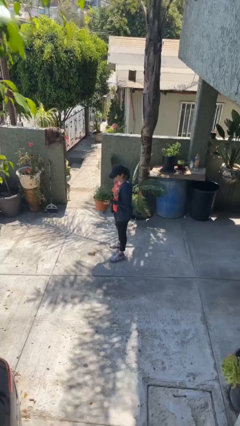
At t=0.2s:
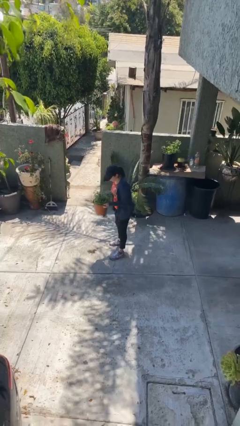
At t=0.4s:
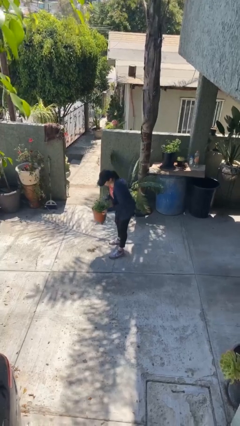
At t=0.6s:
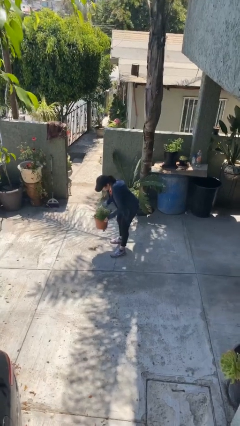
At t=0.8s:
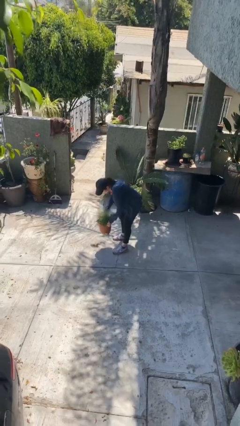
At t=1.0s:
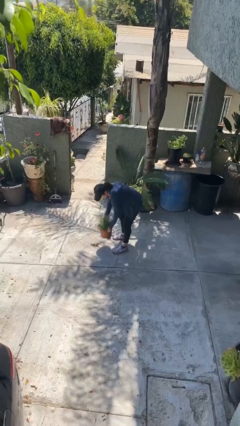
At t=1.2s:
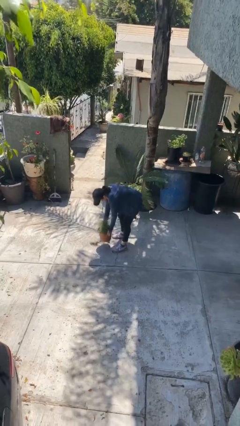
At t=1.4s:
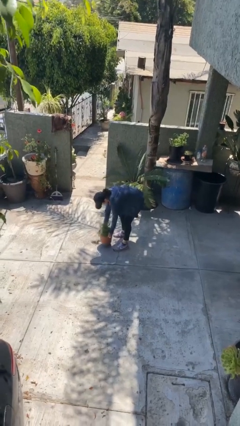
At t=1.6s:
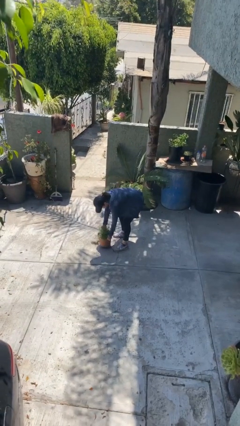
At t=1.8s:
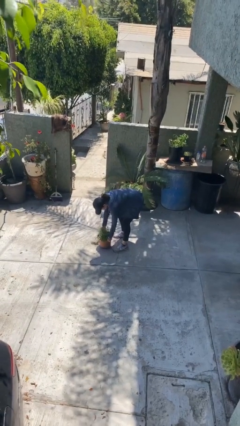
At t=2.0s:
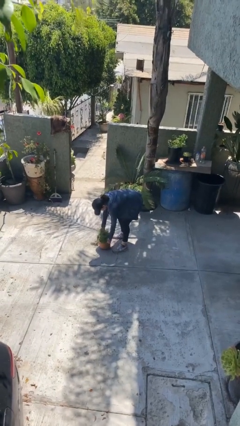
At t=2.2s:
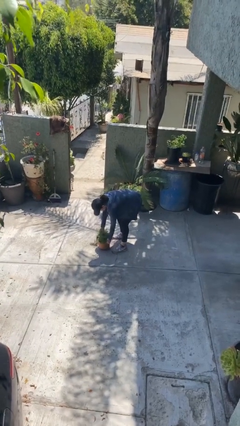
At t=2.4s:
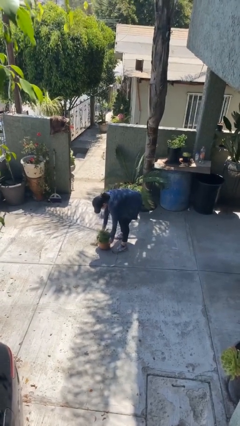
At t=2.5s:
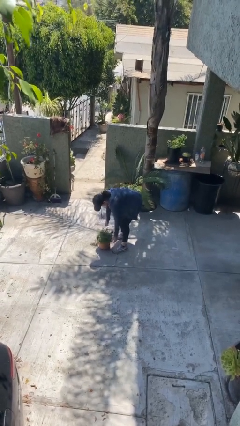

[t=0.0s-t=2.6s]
person puts down object on floor

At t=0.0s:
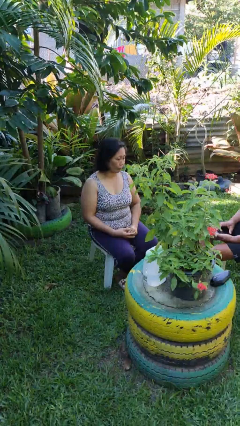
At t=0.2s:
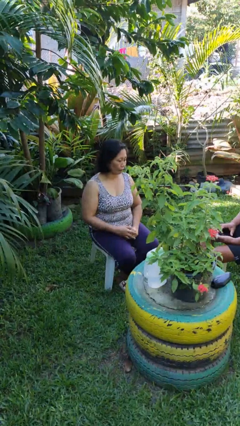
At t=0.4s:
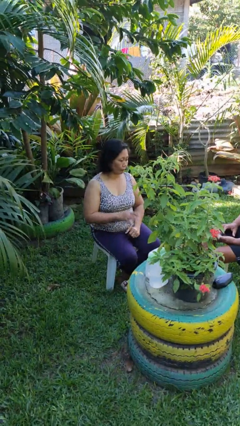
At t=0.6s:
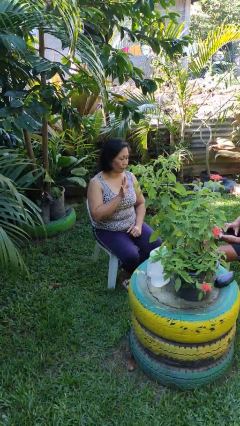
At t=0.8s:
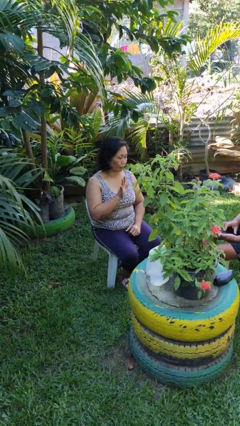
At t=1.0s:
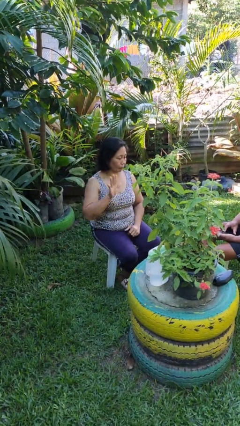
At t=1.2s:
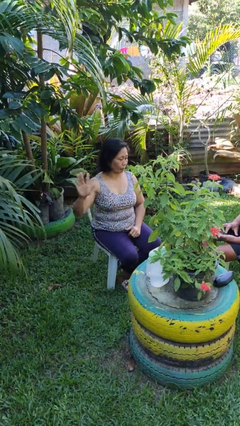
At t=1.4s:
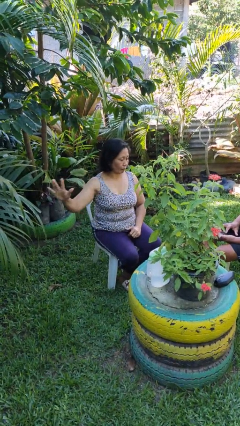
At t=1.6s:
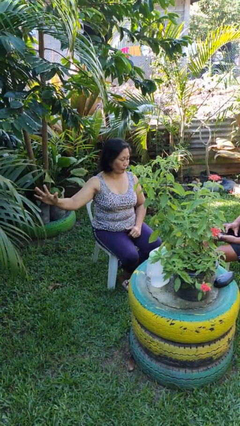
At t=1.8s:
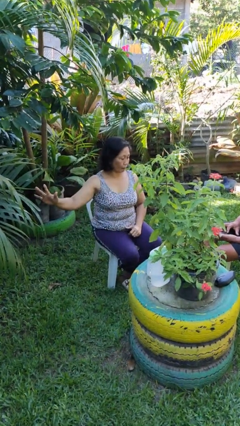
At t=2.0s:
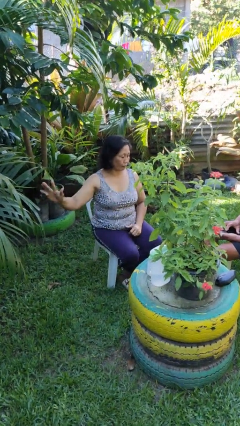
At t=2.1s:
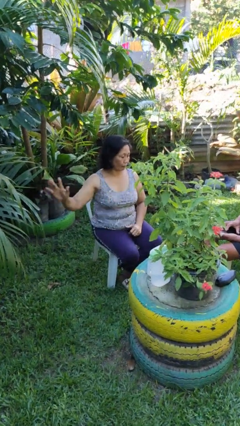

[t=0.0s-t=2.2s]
person gestures swipe right

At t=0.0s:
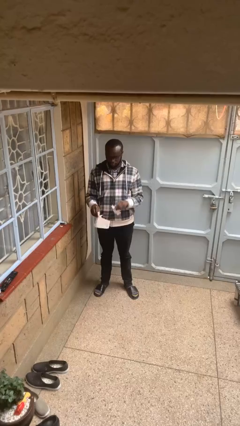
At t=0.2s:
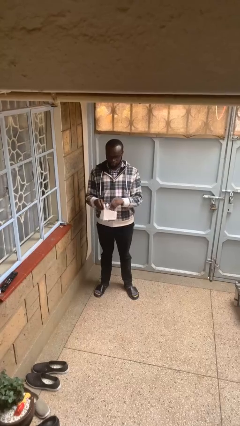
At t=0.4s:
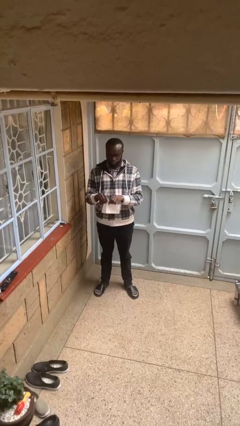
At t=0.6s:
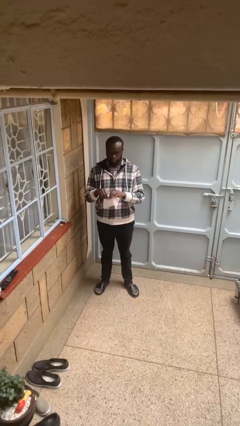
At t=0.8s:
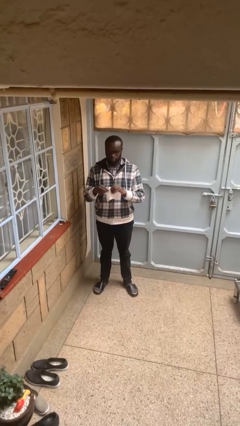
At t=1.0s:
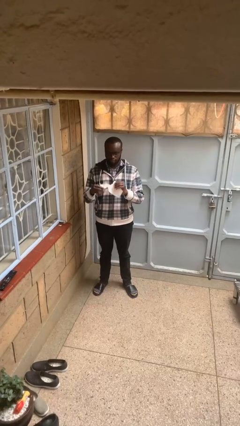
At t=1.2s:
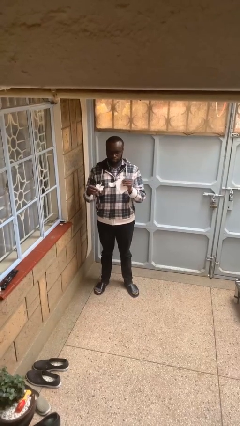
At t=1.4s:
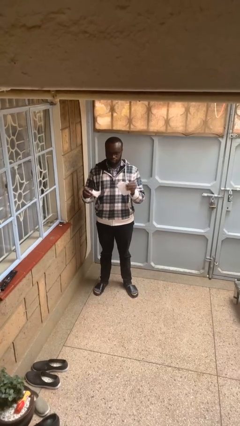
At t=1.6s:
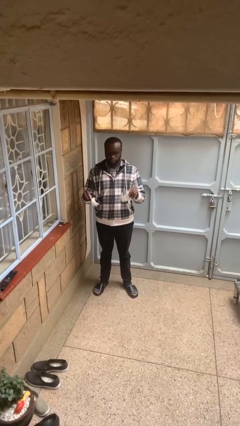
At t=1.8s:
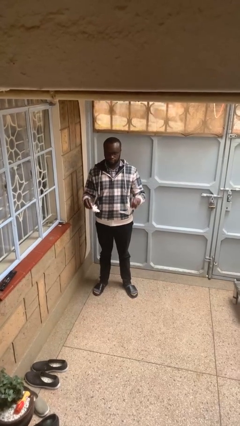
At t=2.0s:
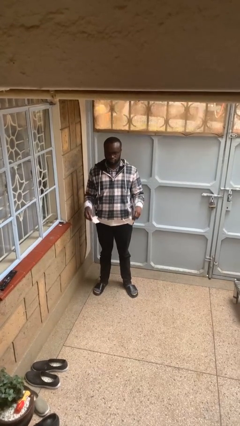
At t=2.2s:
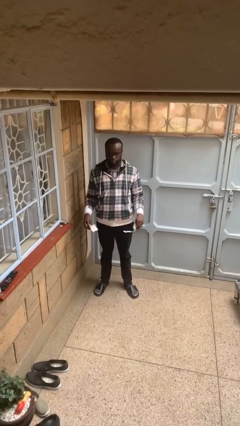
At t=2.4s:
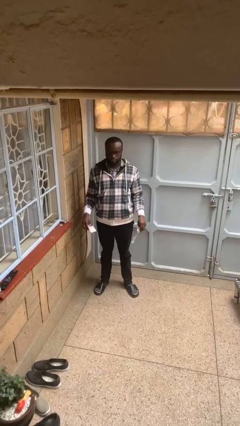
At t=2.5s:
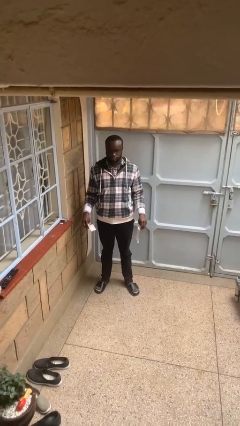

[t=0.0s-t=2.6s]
person tears paper

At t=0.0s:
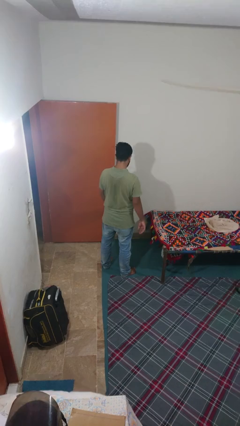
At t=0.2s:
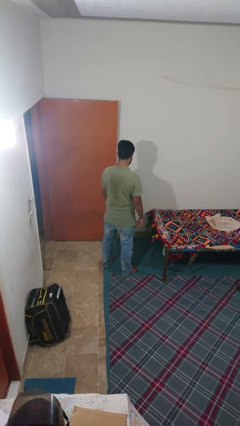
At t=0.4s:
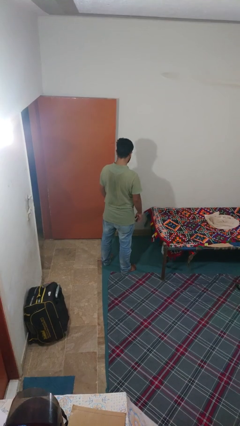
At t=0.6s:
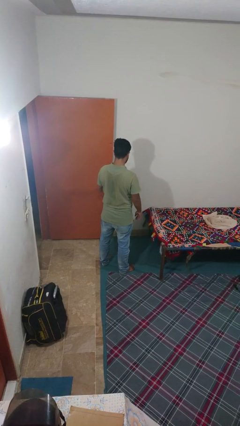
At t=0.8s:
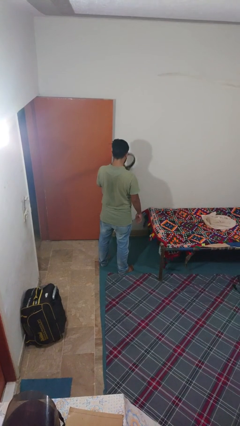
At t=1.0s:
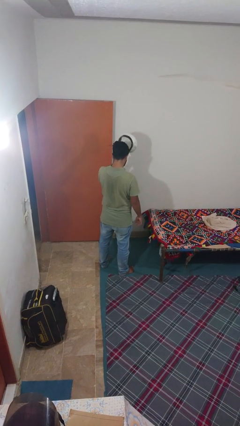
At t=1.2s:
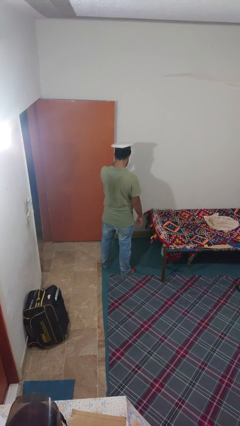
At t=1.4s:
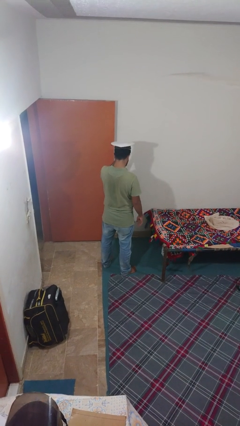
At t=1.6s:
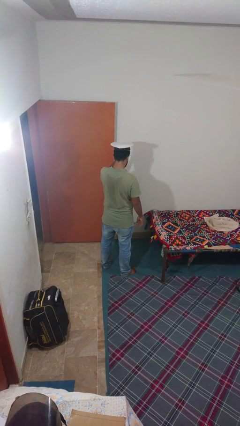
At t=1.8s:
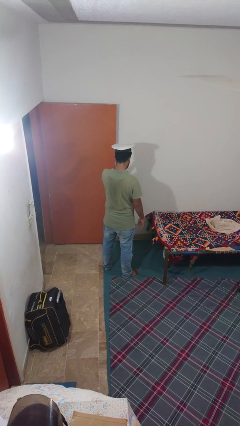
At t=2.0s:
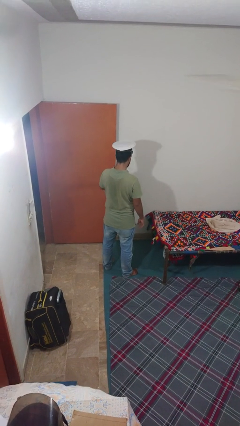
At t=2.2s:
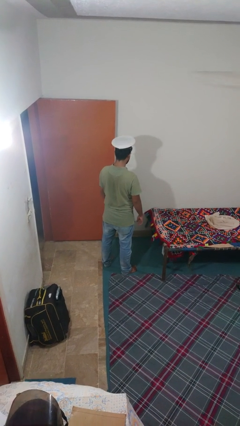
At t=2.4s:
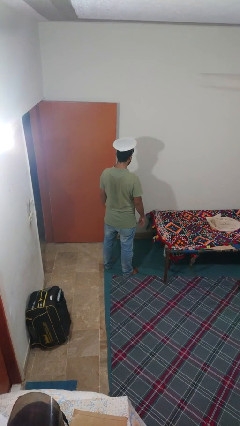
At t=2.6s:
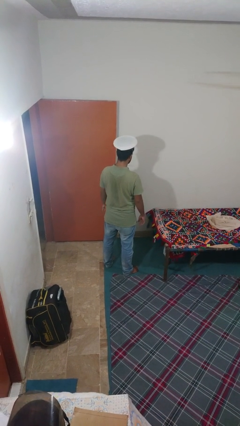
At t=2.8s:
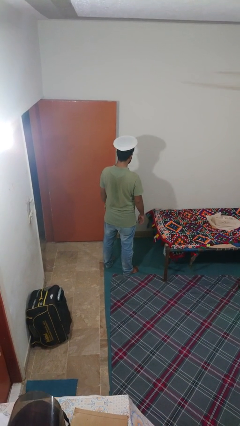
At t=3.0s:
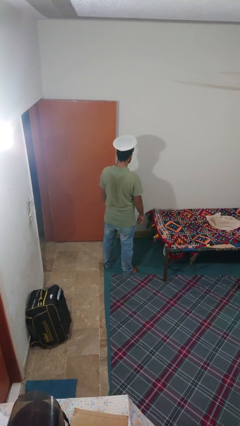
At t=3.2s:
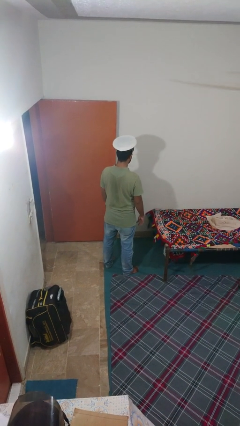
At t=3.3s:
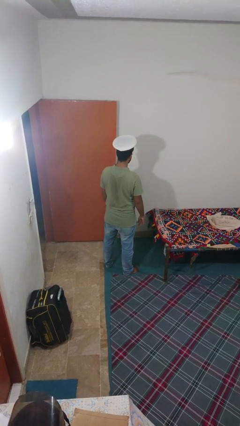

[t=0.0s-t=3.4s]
person puts on hat

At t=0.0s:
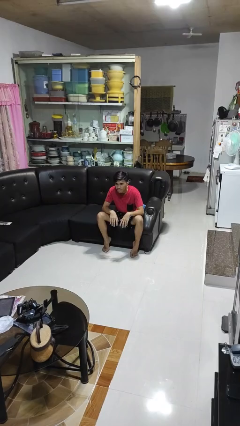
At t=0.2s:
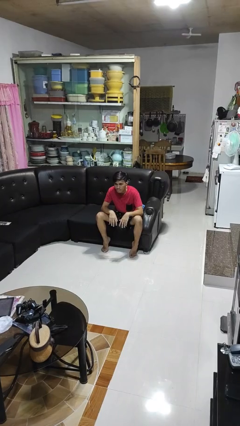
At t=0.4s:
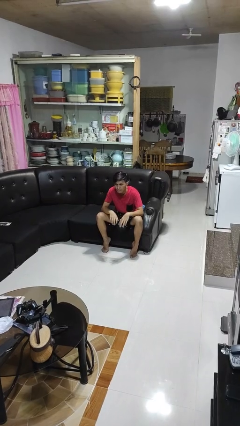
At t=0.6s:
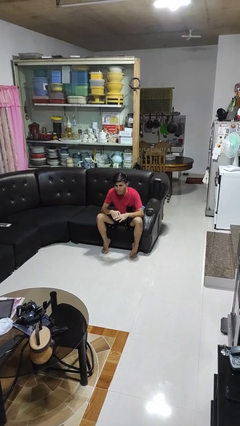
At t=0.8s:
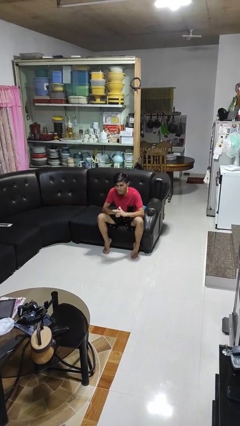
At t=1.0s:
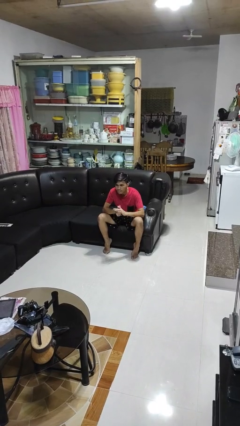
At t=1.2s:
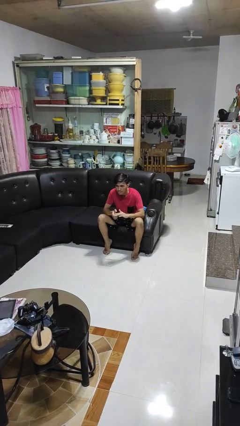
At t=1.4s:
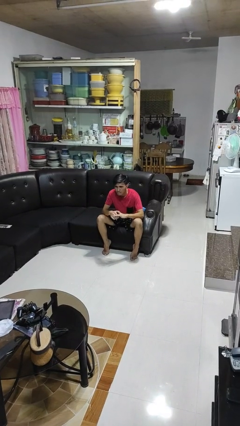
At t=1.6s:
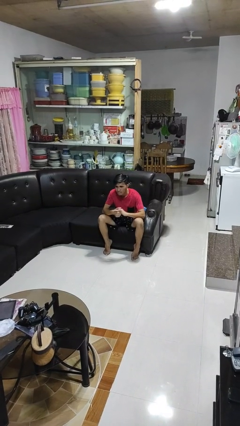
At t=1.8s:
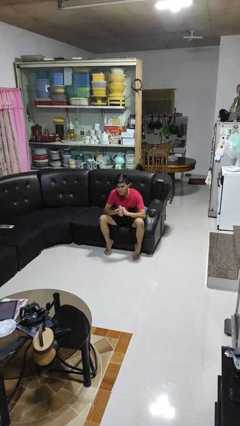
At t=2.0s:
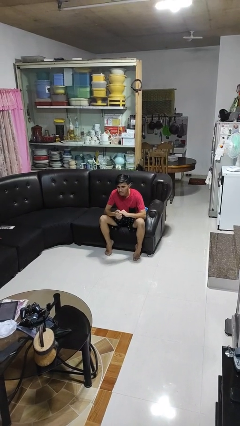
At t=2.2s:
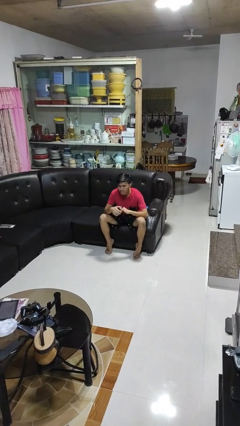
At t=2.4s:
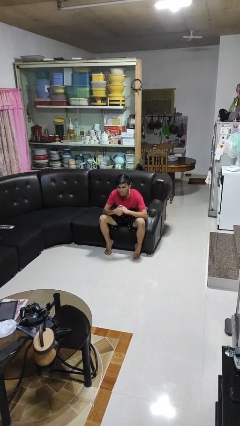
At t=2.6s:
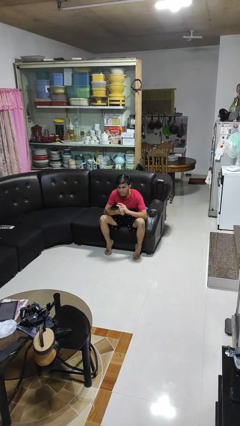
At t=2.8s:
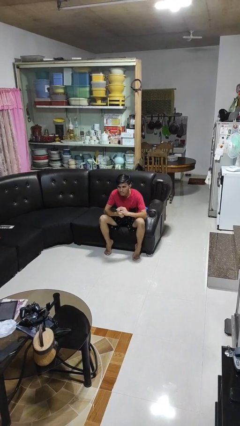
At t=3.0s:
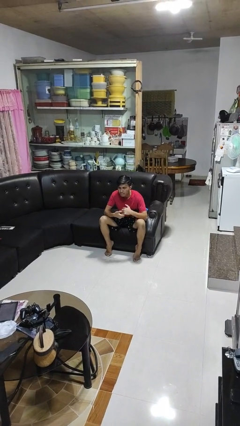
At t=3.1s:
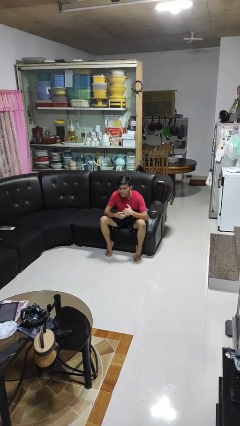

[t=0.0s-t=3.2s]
person cracks knuckles

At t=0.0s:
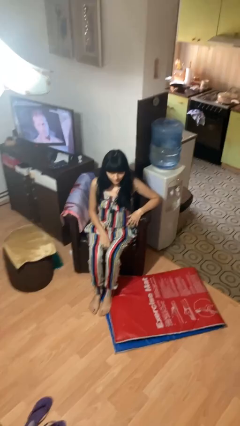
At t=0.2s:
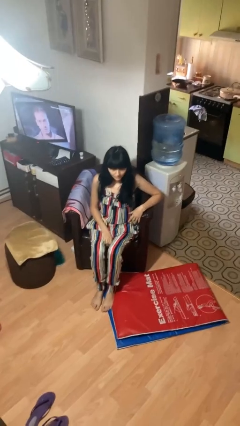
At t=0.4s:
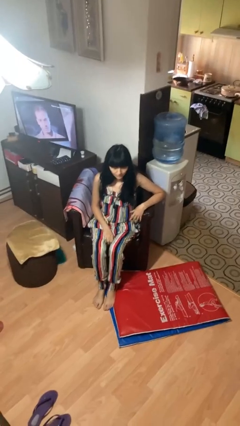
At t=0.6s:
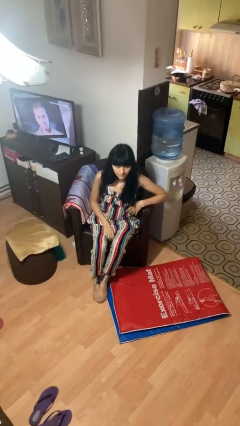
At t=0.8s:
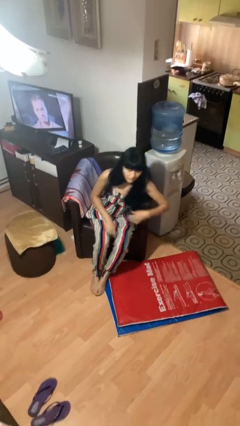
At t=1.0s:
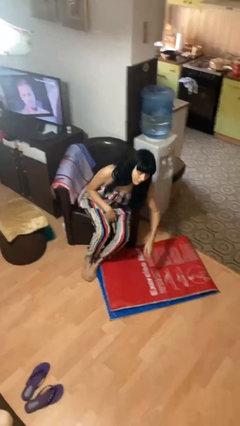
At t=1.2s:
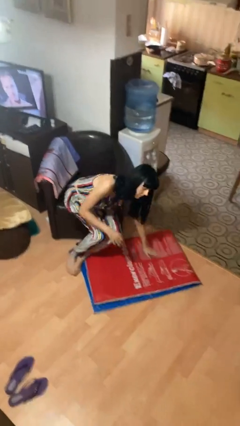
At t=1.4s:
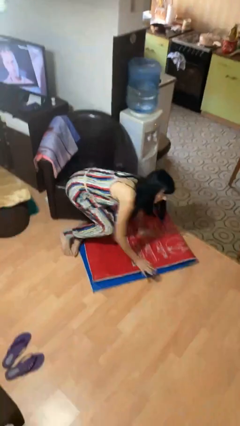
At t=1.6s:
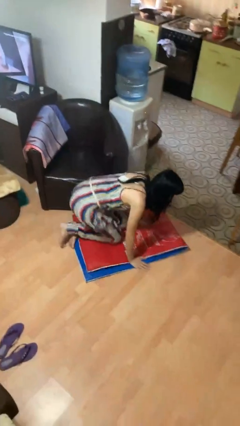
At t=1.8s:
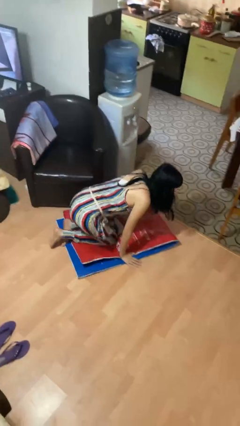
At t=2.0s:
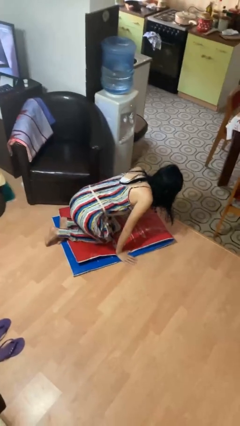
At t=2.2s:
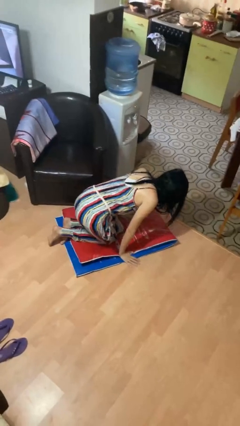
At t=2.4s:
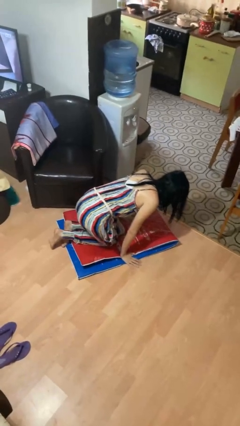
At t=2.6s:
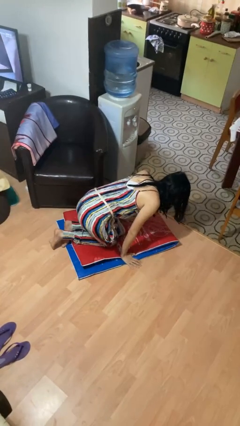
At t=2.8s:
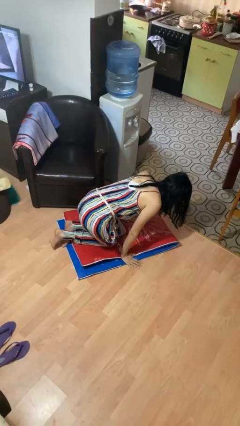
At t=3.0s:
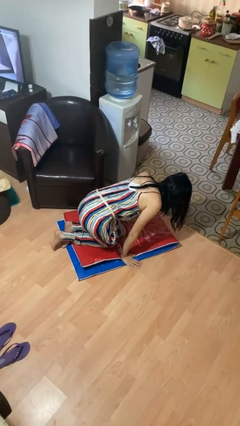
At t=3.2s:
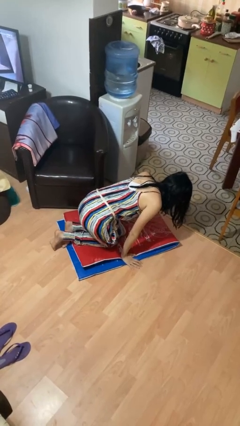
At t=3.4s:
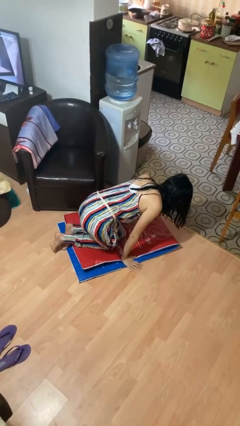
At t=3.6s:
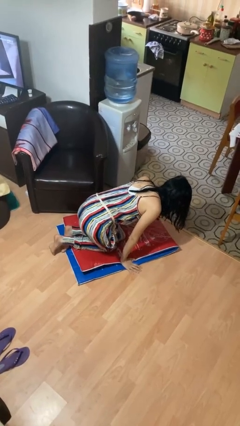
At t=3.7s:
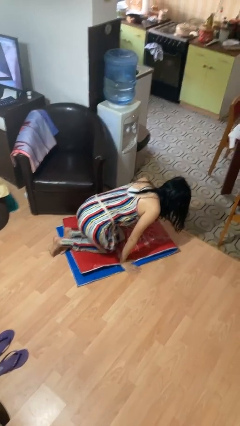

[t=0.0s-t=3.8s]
person falls from chair
